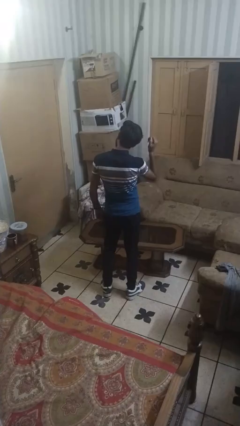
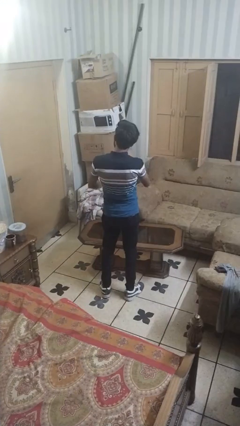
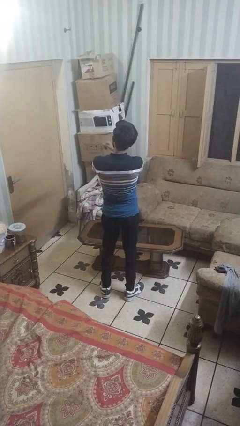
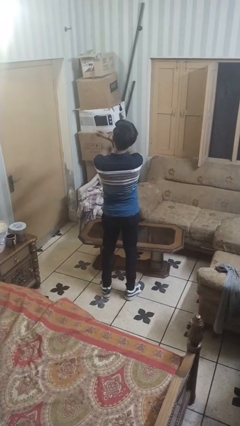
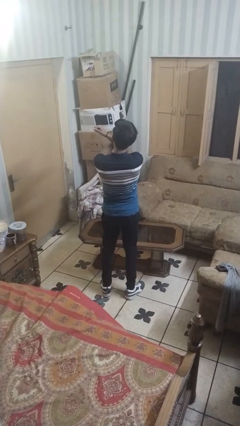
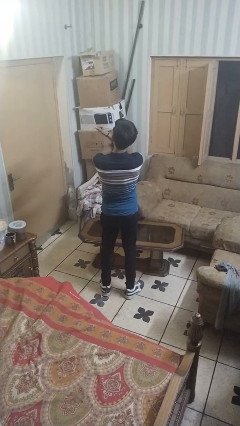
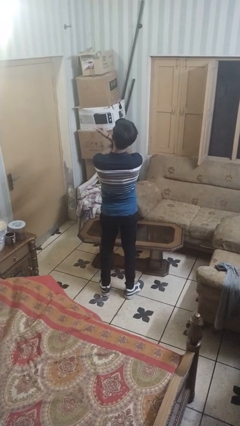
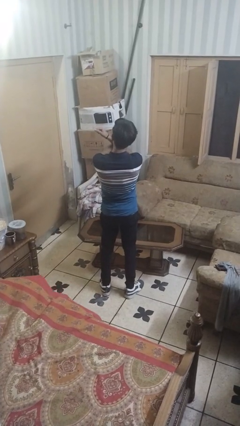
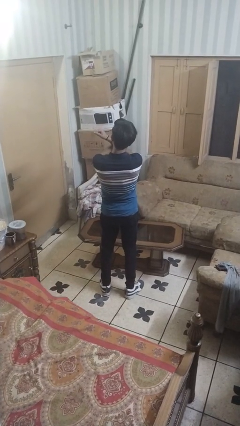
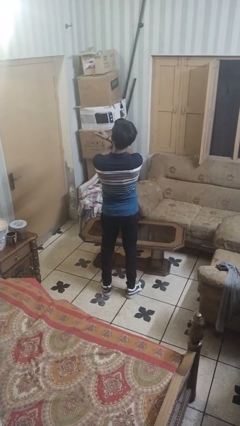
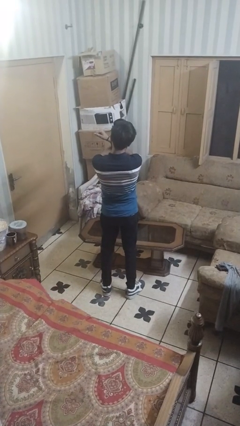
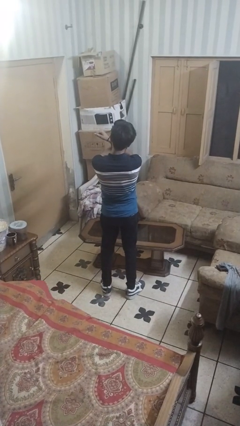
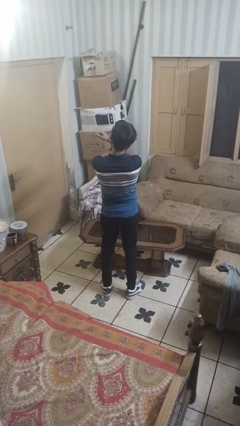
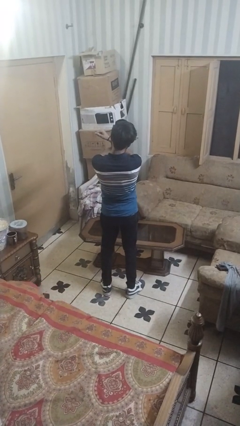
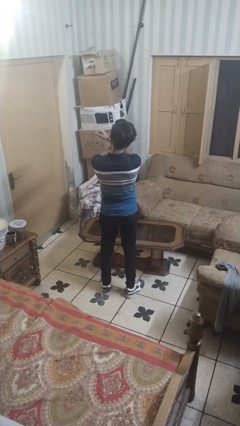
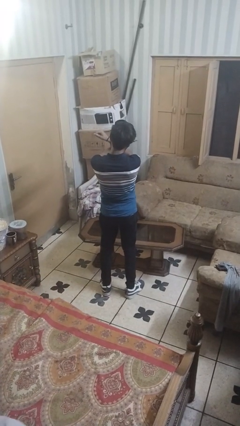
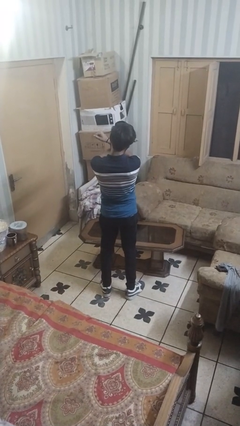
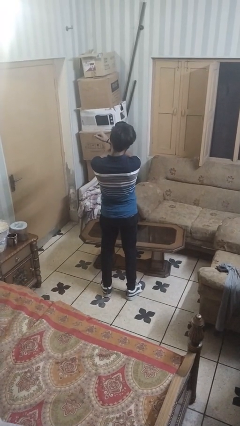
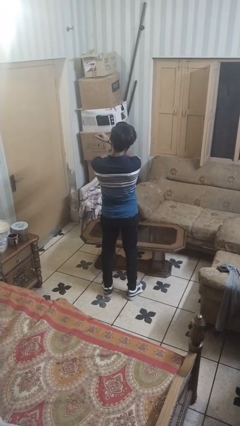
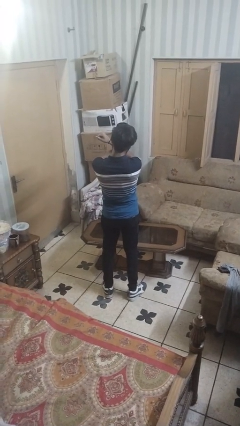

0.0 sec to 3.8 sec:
person gestures arms x

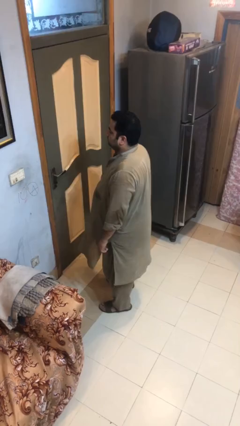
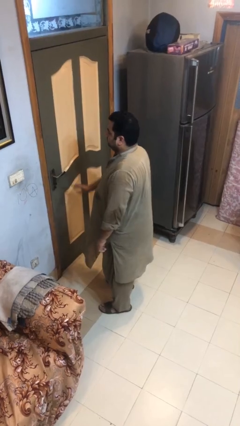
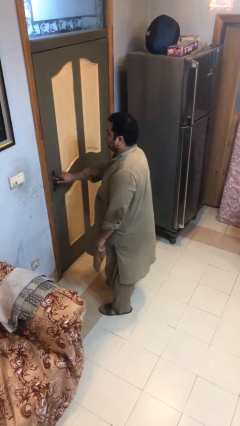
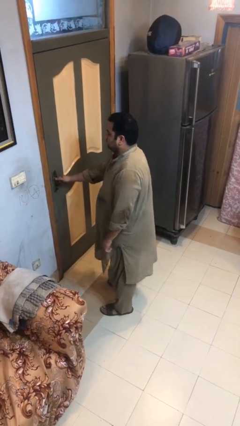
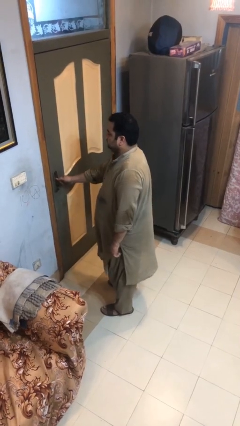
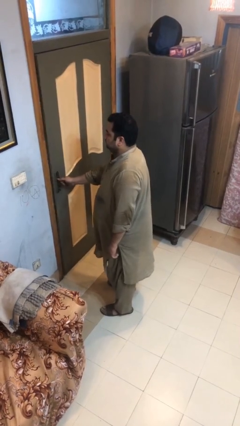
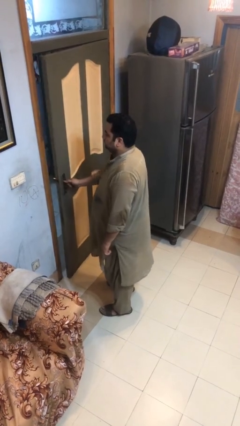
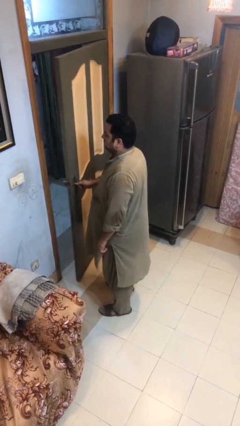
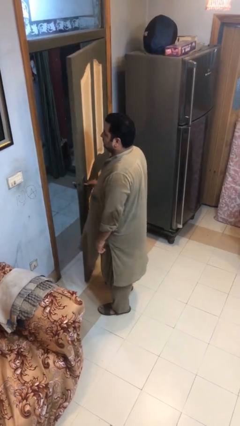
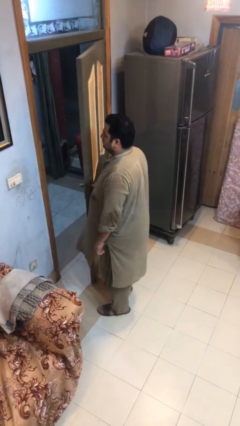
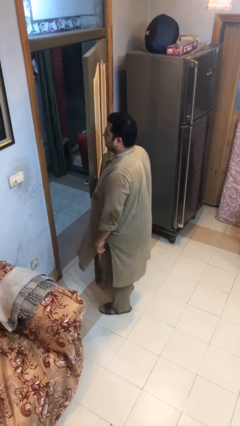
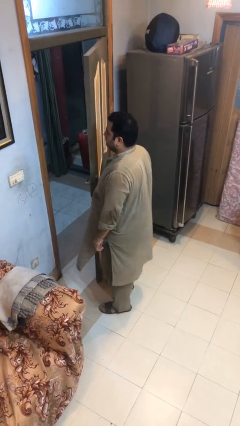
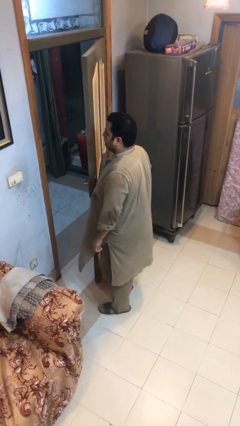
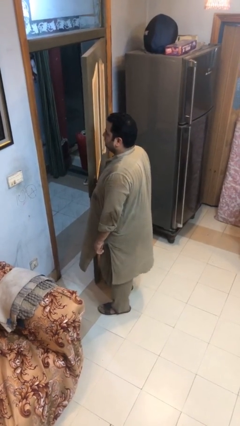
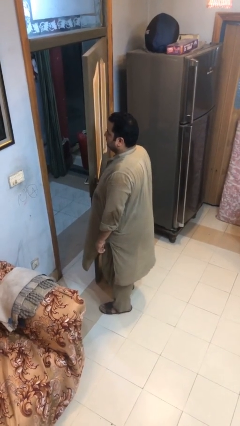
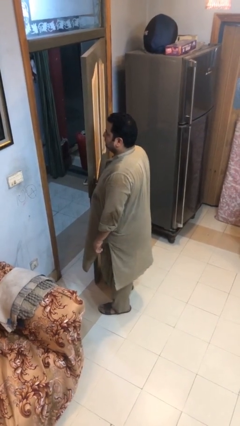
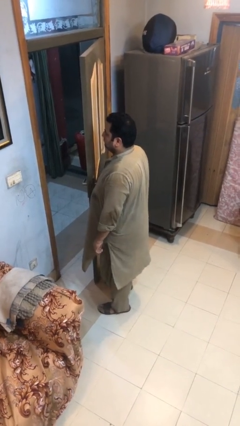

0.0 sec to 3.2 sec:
person opens facility door

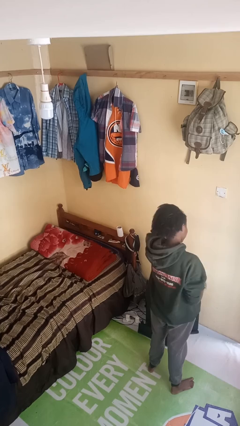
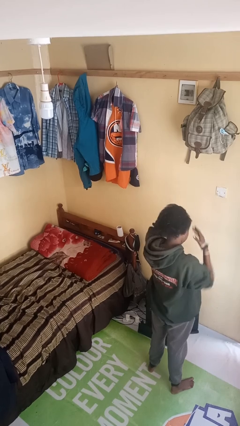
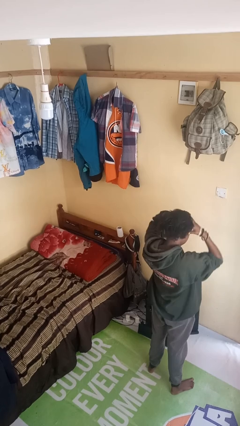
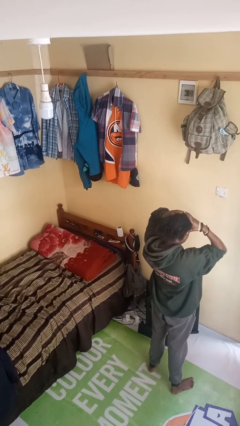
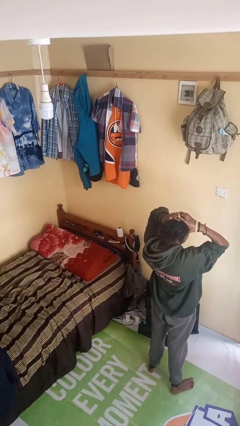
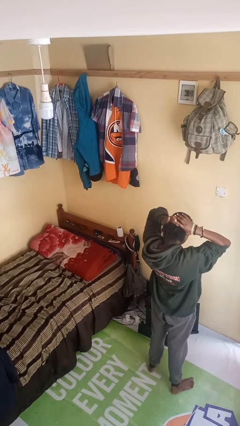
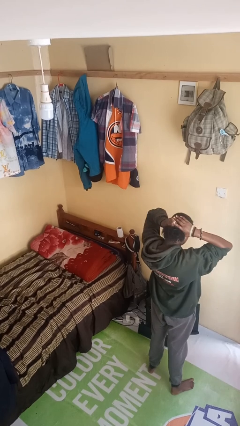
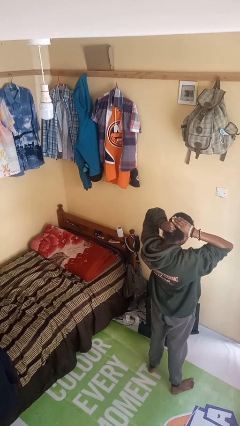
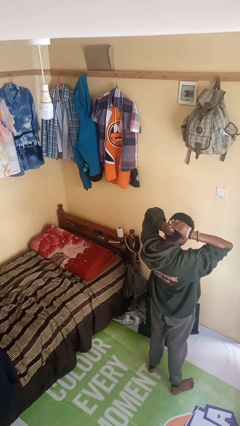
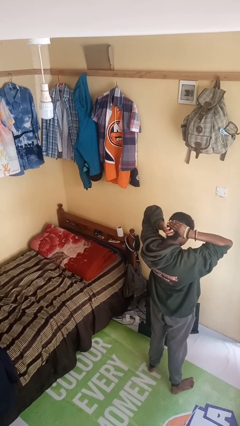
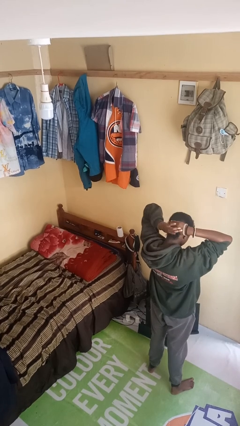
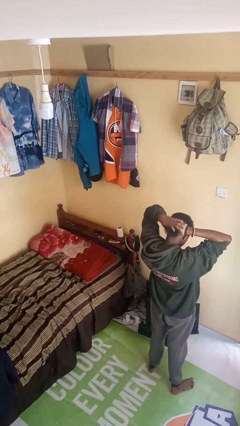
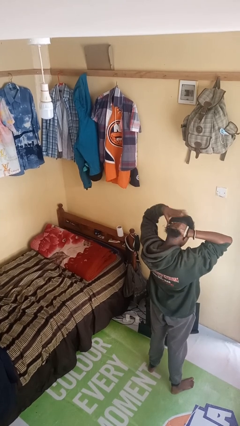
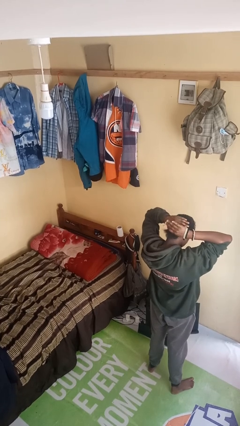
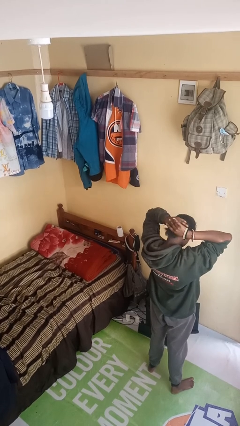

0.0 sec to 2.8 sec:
person strokes hair

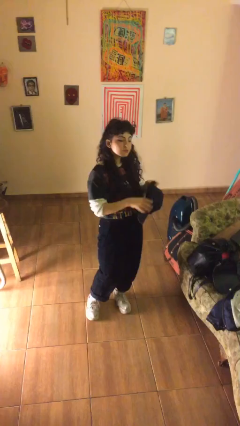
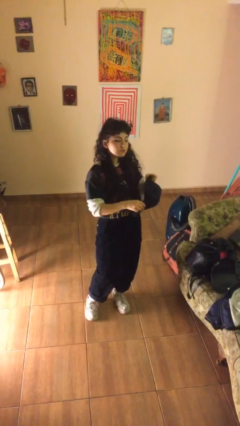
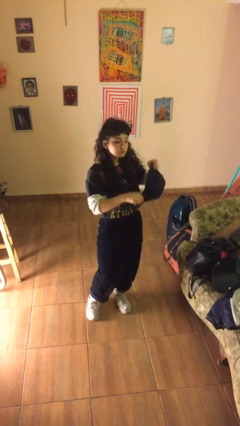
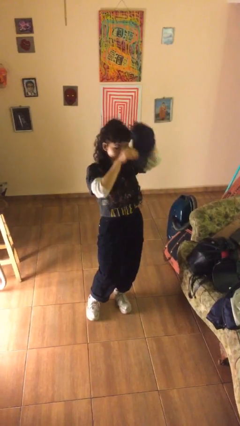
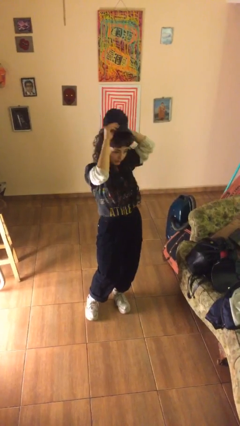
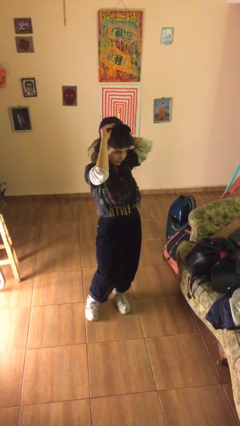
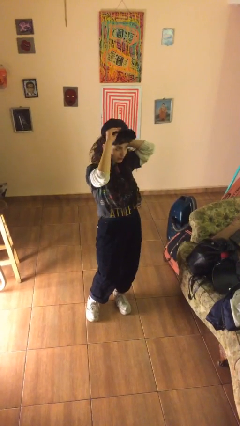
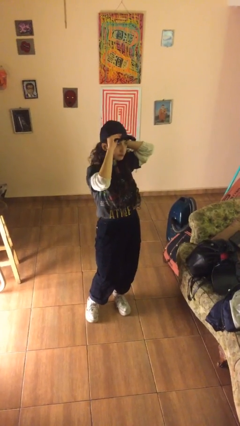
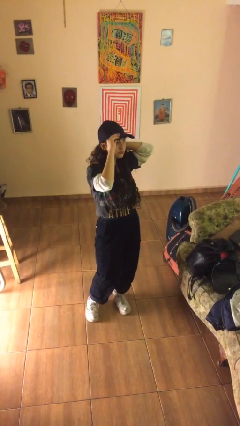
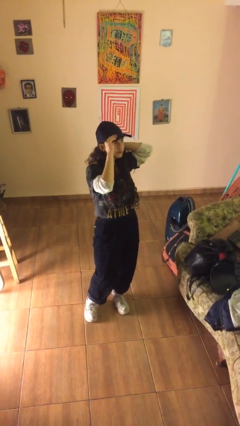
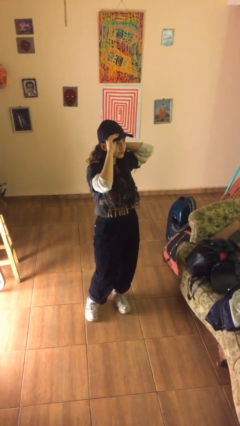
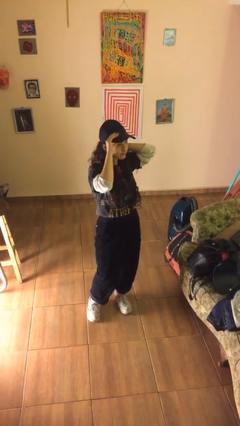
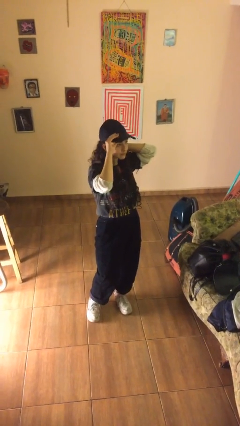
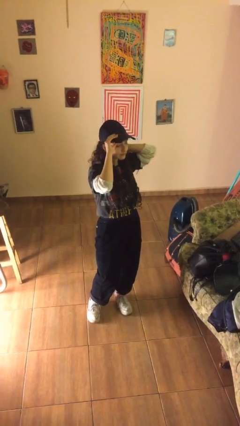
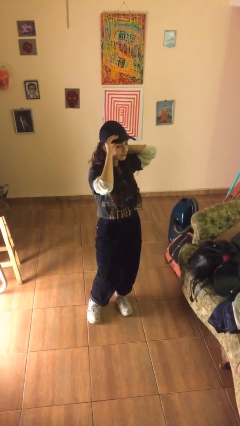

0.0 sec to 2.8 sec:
person puts on hat

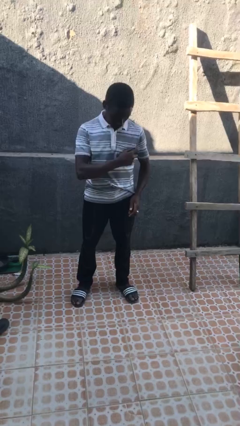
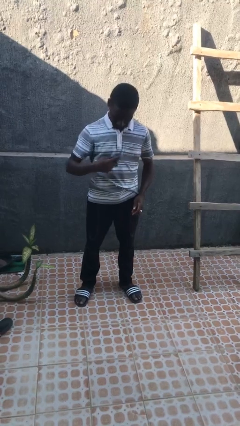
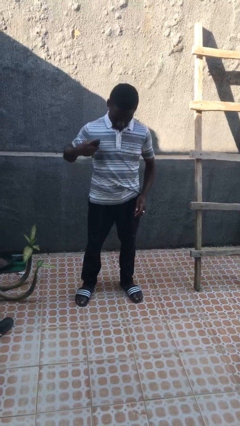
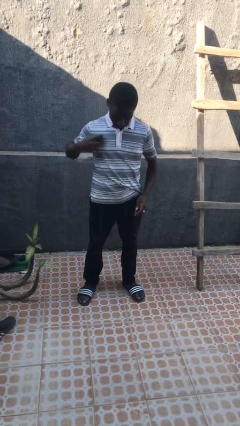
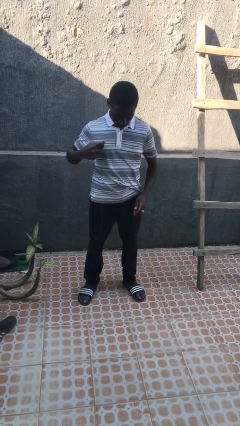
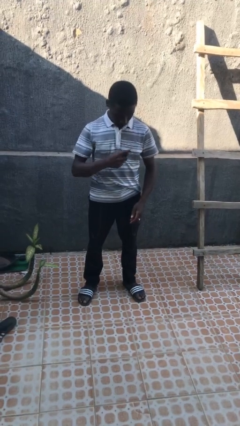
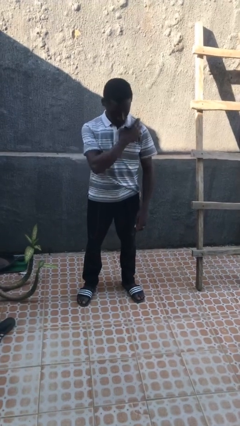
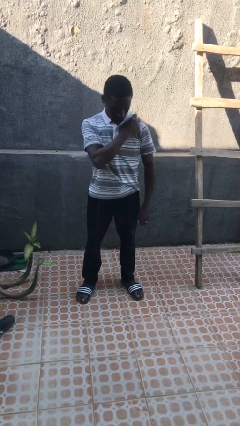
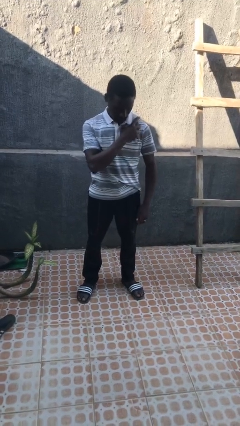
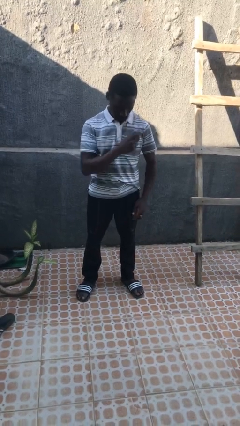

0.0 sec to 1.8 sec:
person applies deodorant

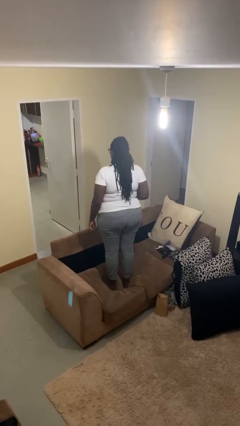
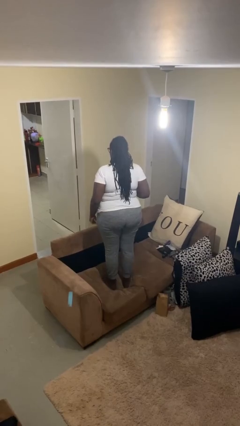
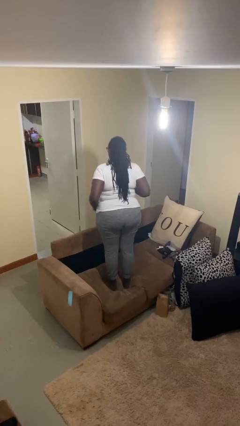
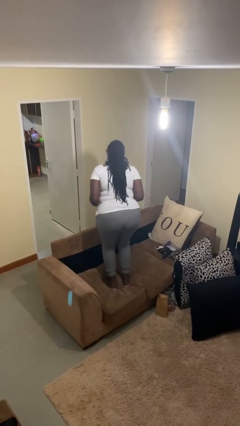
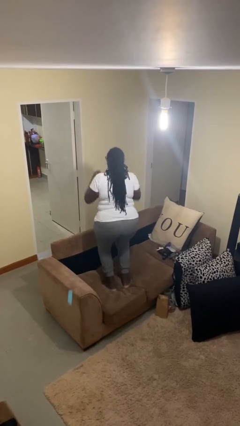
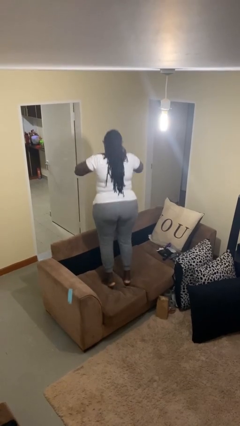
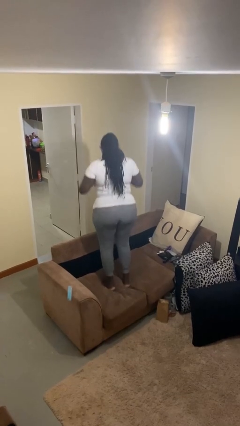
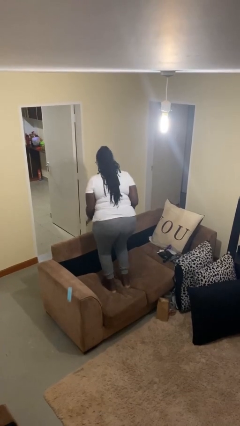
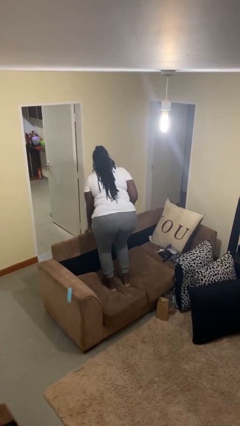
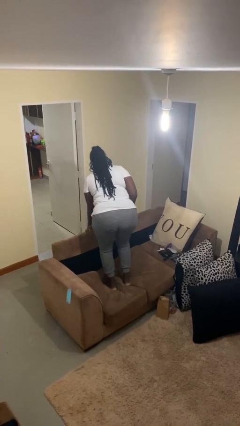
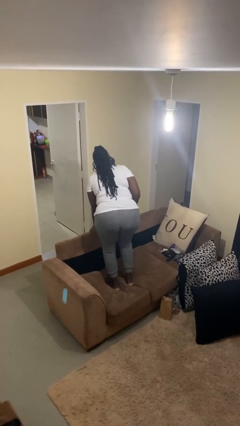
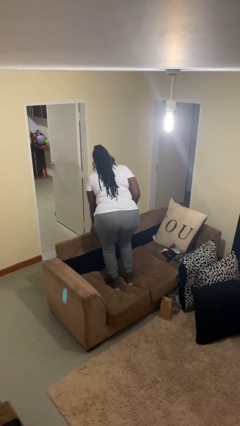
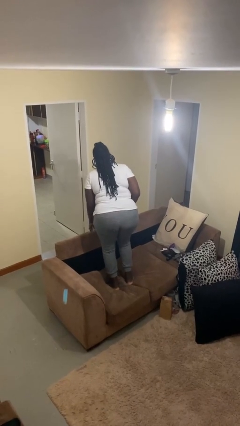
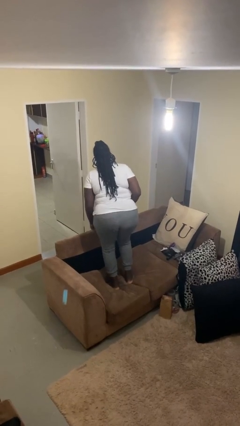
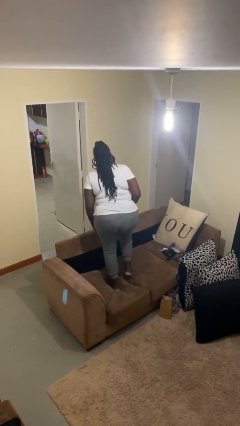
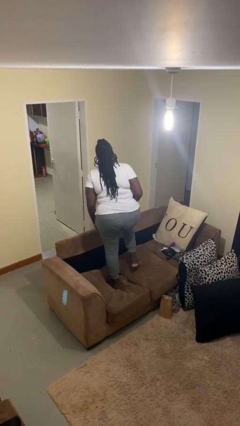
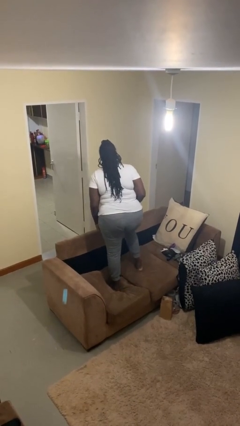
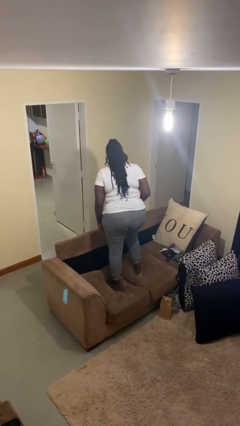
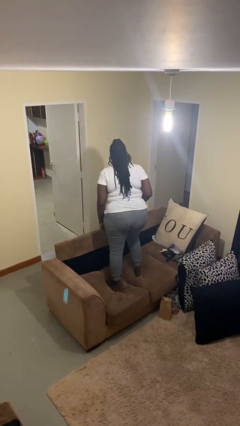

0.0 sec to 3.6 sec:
person jumps on couch
